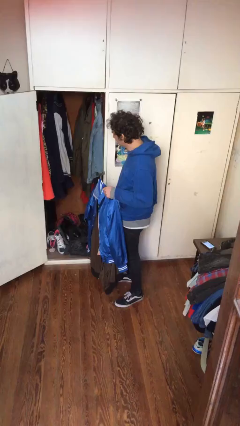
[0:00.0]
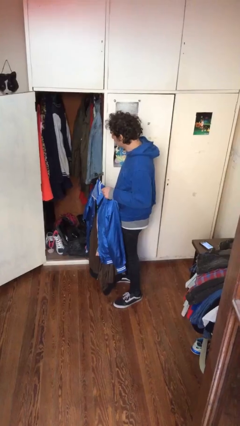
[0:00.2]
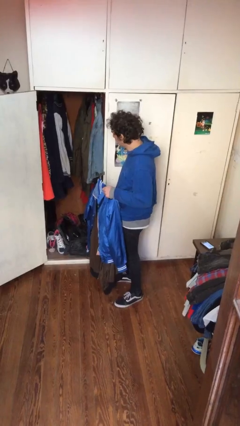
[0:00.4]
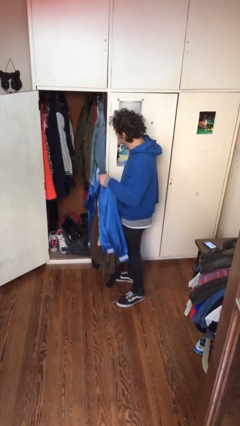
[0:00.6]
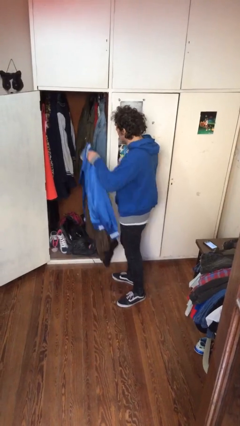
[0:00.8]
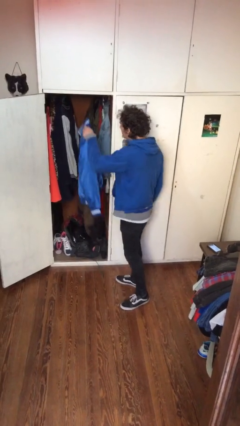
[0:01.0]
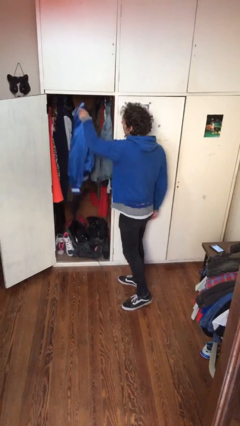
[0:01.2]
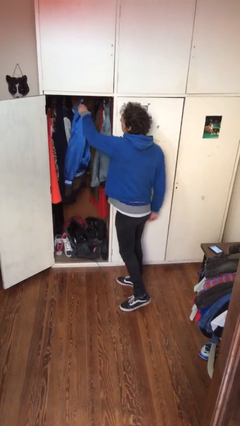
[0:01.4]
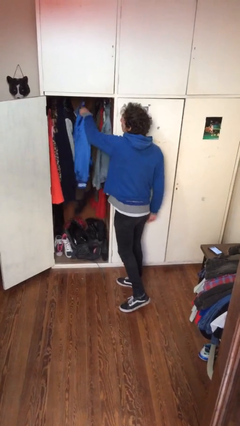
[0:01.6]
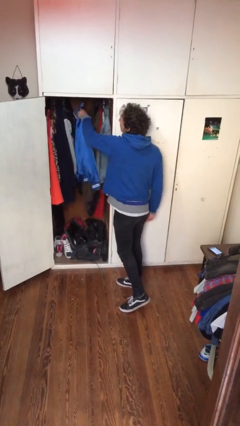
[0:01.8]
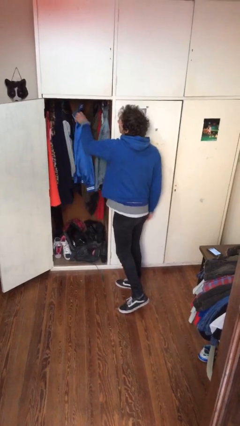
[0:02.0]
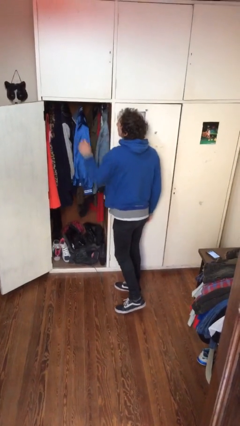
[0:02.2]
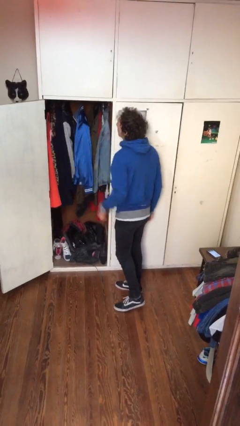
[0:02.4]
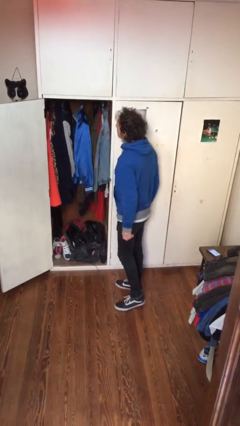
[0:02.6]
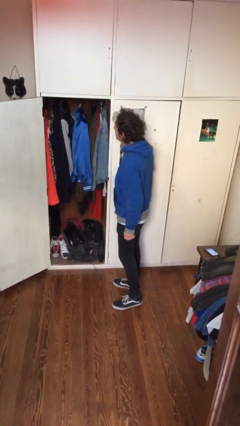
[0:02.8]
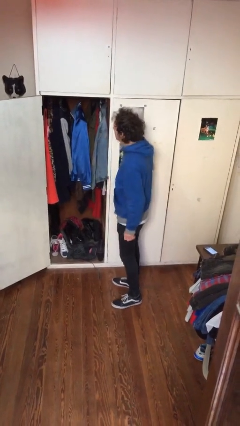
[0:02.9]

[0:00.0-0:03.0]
person puts clothes into closet

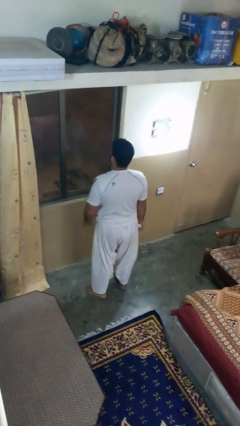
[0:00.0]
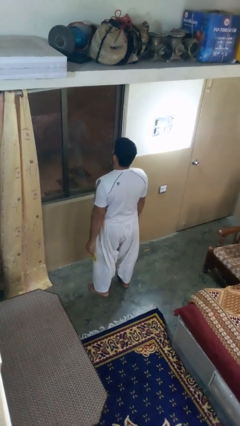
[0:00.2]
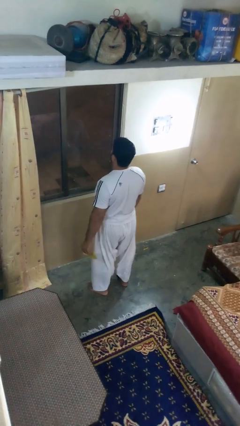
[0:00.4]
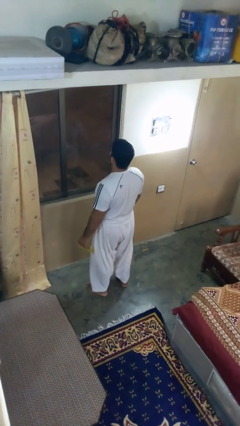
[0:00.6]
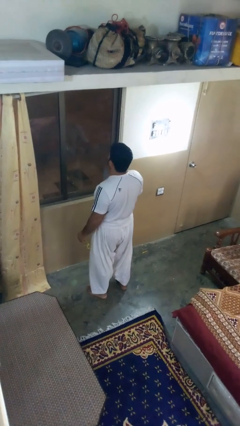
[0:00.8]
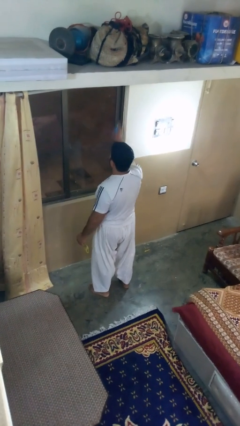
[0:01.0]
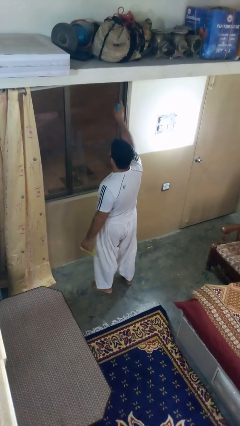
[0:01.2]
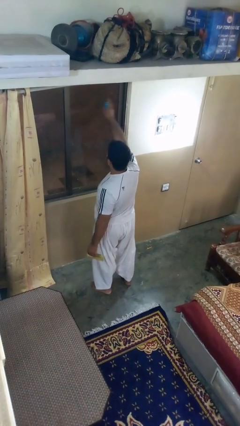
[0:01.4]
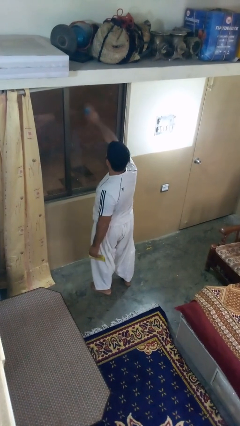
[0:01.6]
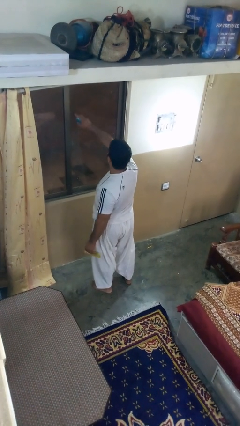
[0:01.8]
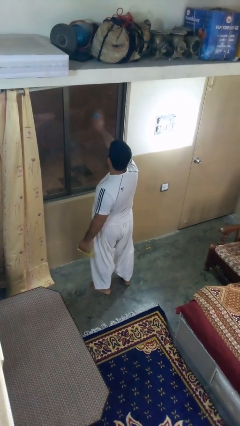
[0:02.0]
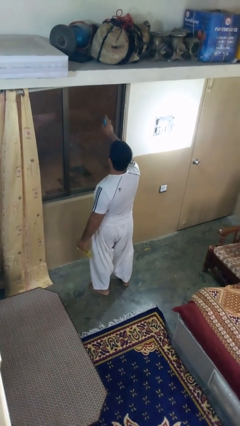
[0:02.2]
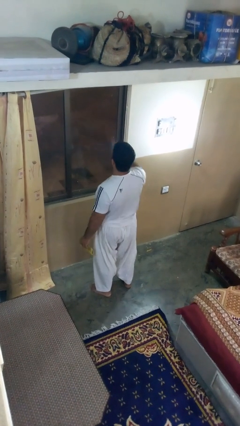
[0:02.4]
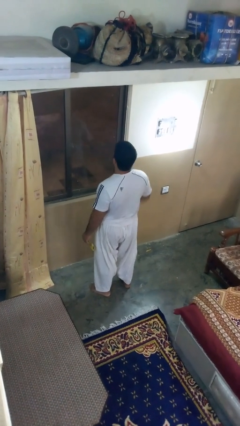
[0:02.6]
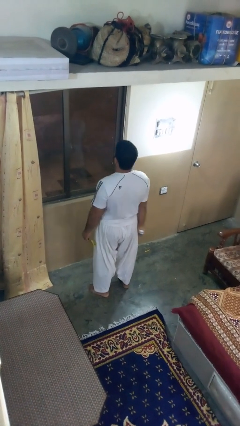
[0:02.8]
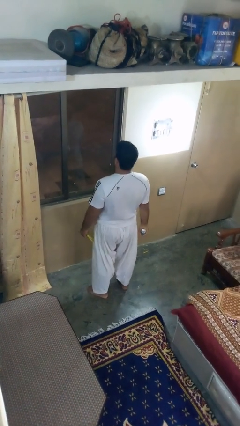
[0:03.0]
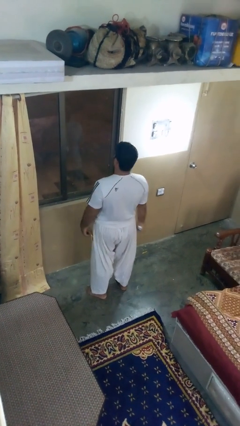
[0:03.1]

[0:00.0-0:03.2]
person sprays from bottle

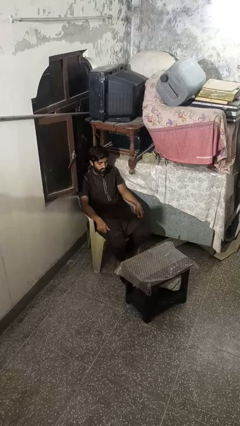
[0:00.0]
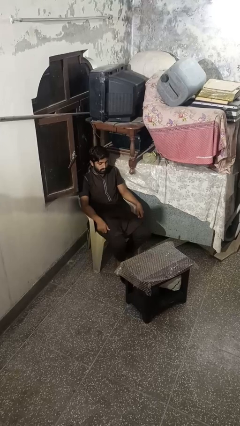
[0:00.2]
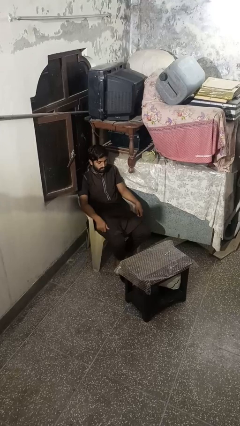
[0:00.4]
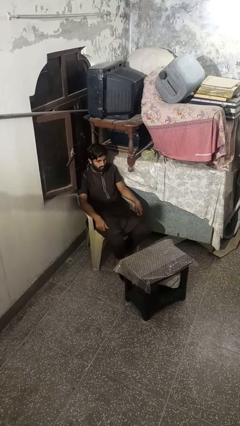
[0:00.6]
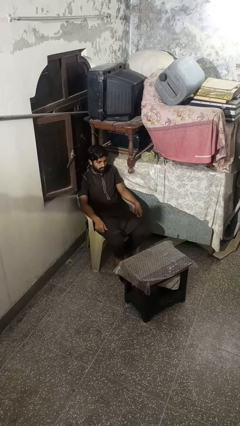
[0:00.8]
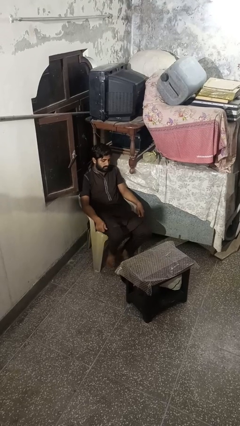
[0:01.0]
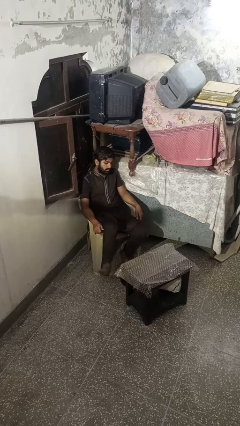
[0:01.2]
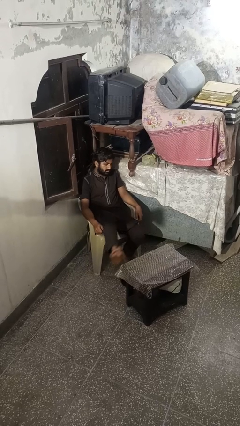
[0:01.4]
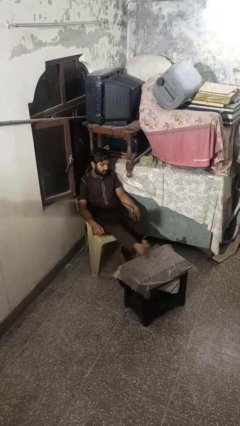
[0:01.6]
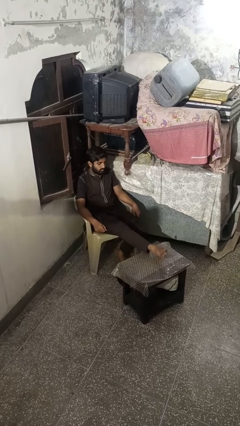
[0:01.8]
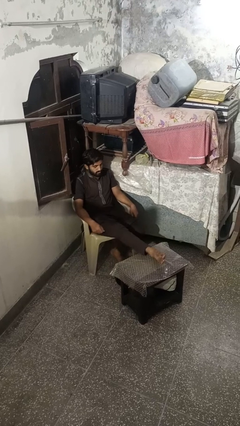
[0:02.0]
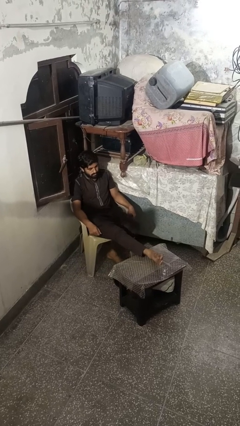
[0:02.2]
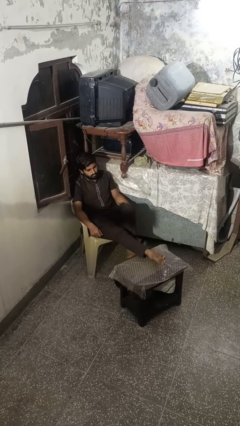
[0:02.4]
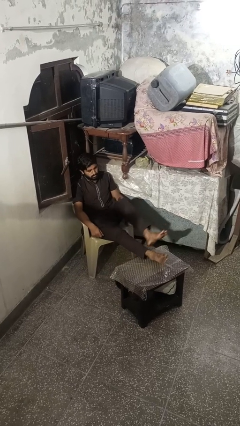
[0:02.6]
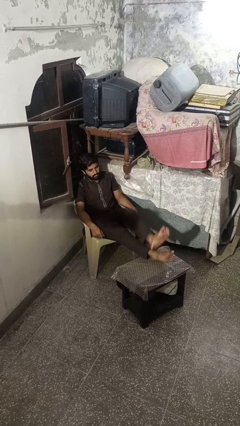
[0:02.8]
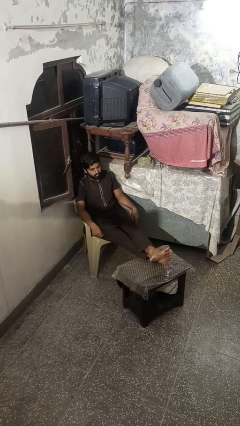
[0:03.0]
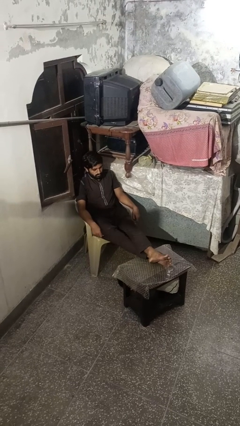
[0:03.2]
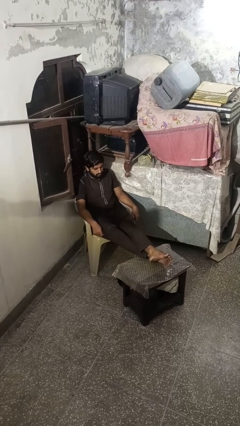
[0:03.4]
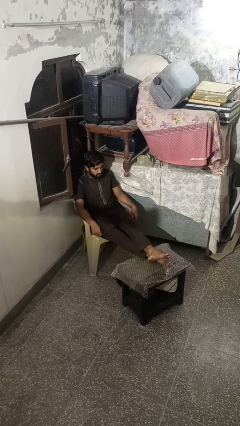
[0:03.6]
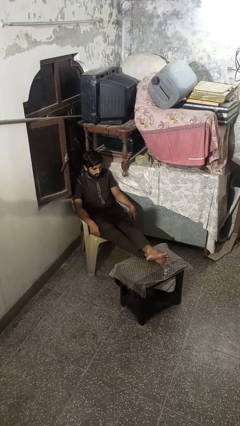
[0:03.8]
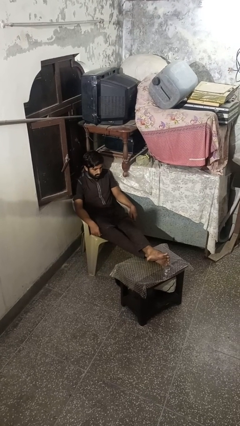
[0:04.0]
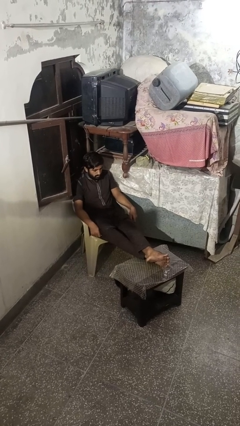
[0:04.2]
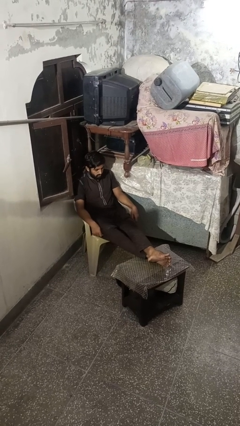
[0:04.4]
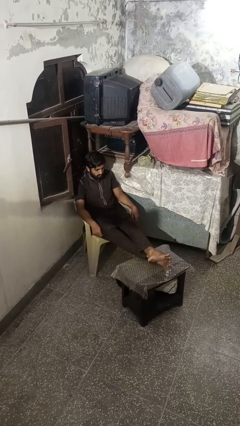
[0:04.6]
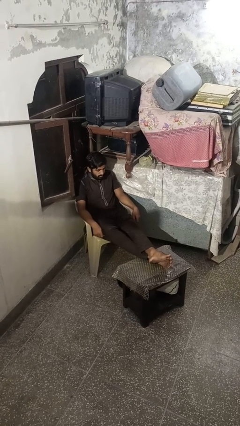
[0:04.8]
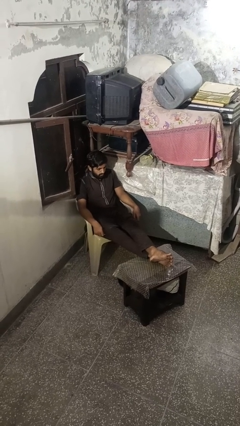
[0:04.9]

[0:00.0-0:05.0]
person puts feet up

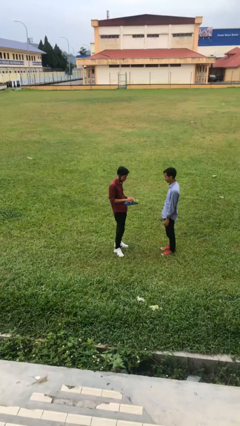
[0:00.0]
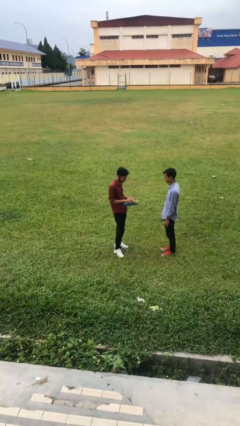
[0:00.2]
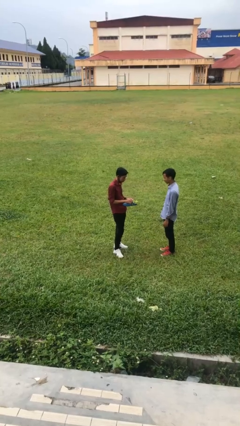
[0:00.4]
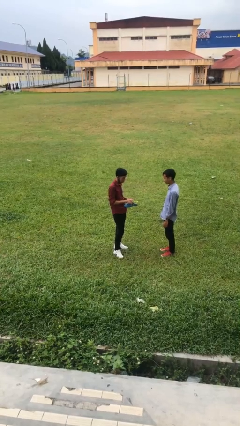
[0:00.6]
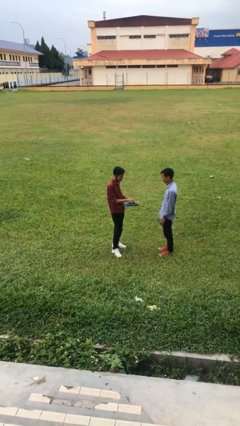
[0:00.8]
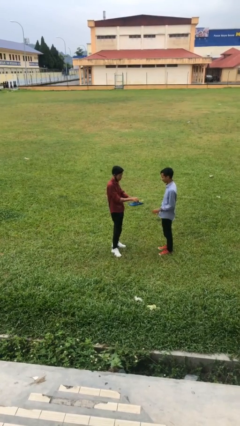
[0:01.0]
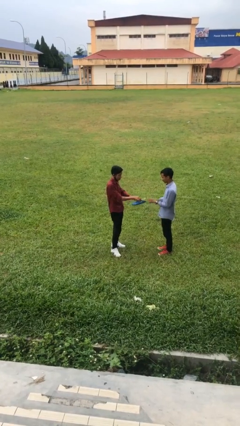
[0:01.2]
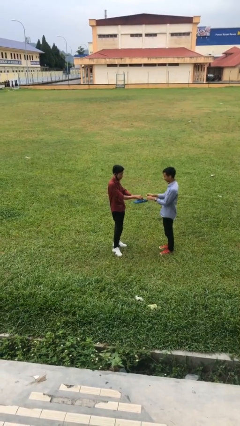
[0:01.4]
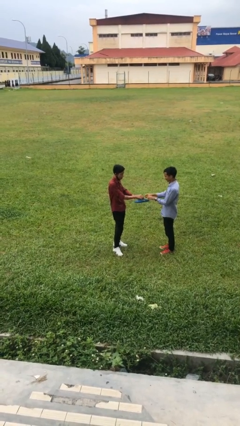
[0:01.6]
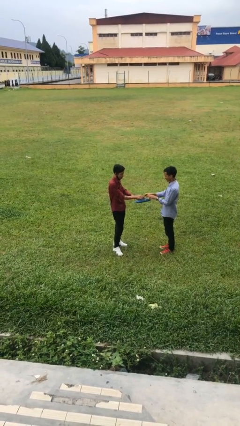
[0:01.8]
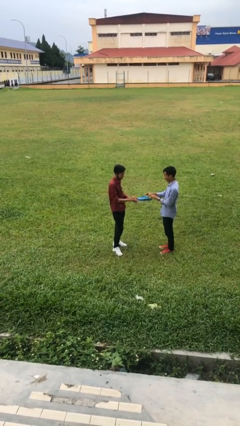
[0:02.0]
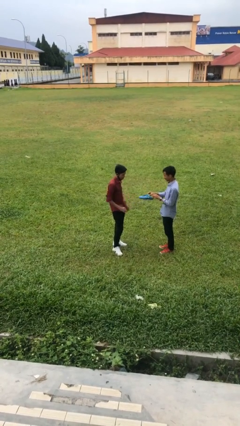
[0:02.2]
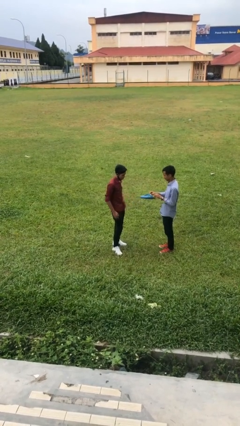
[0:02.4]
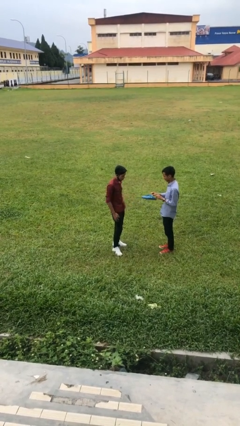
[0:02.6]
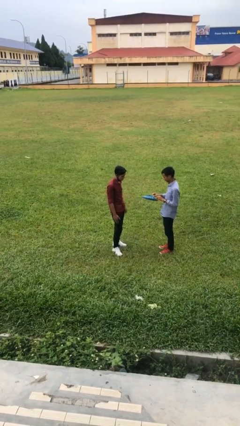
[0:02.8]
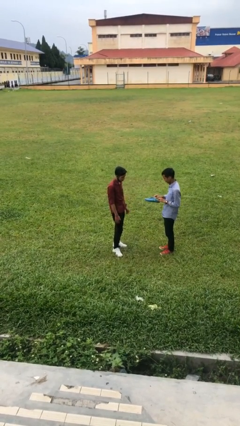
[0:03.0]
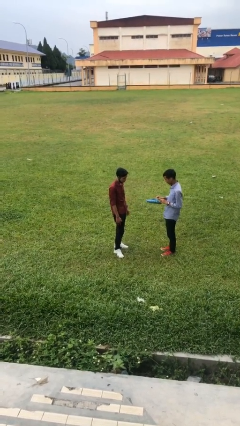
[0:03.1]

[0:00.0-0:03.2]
person transfers object to person

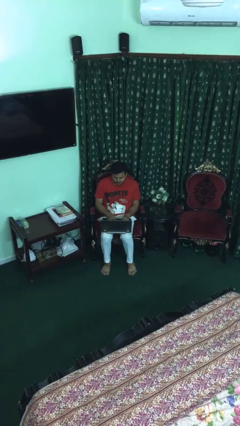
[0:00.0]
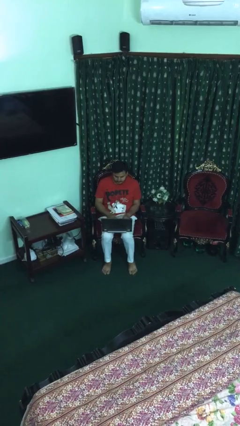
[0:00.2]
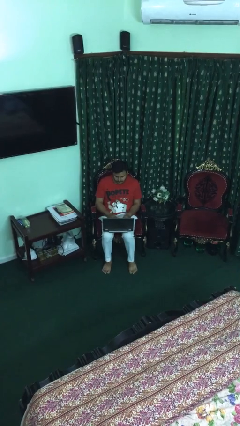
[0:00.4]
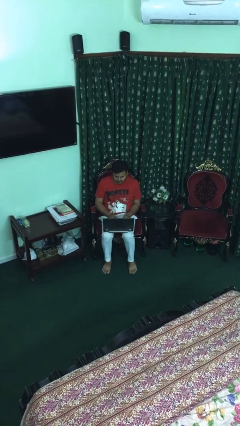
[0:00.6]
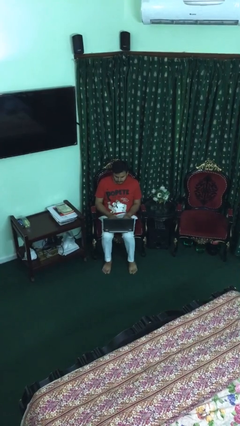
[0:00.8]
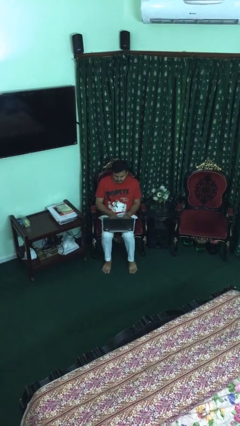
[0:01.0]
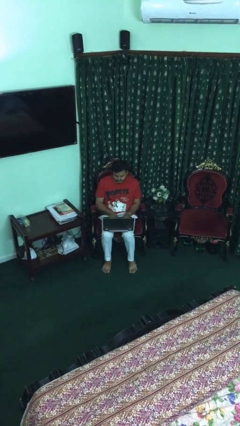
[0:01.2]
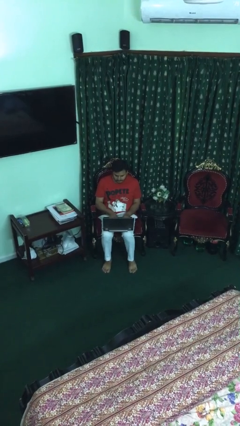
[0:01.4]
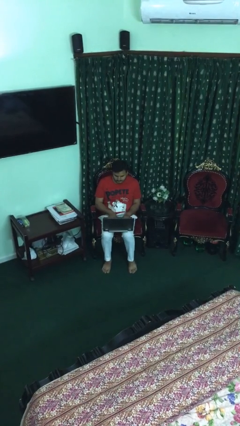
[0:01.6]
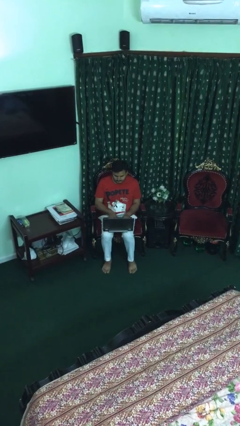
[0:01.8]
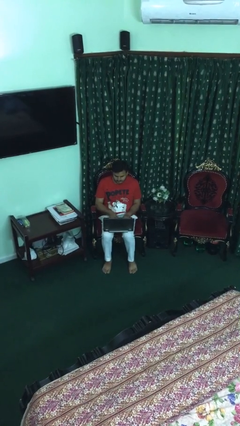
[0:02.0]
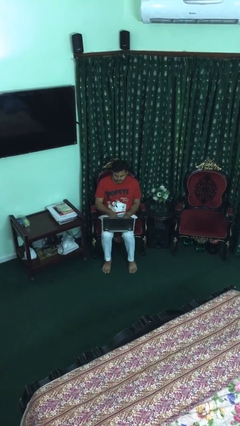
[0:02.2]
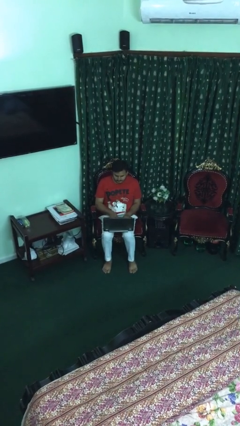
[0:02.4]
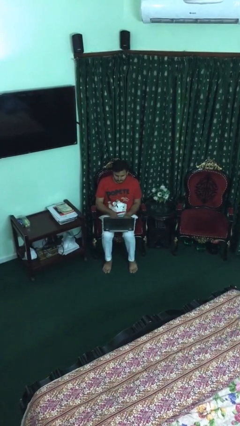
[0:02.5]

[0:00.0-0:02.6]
person interacts with laptop

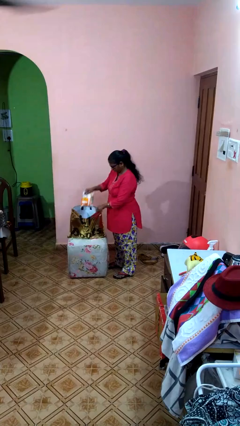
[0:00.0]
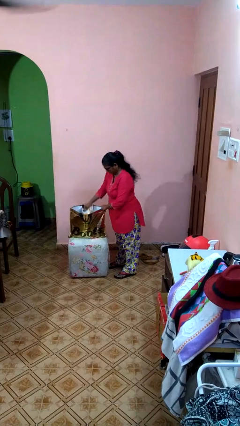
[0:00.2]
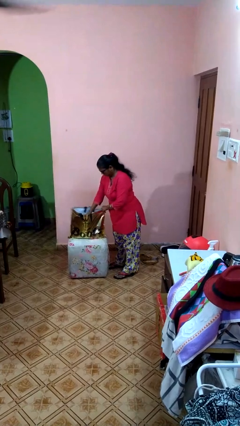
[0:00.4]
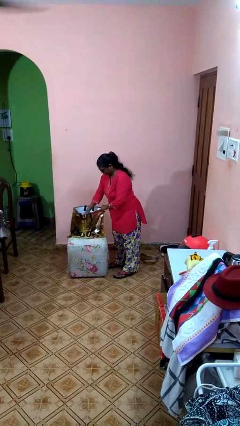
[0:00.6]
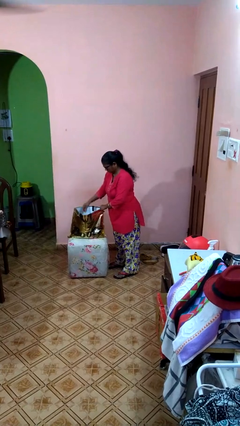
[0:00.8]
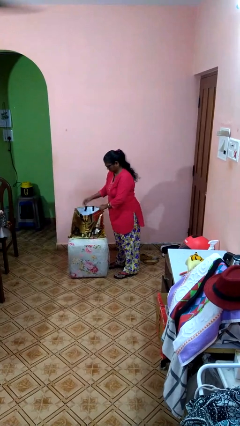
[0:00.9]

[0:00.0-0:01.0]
person puts object into bag
